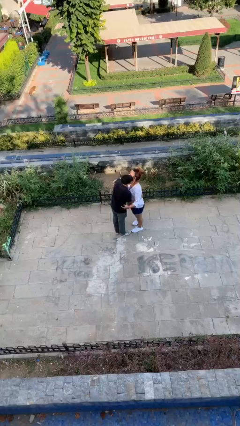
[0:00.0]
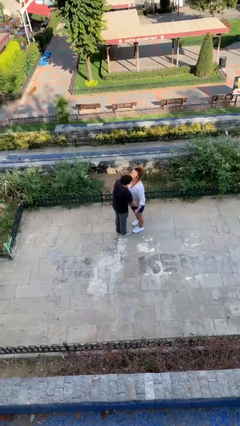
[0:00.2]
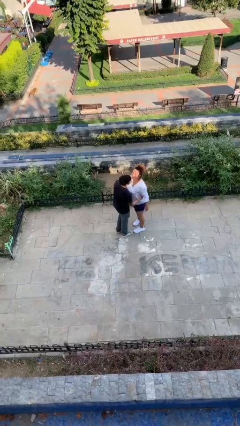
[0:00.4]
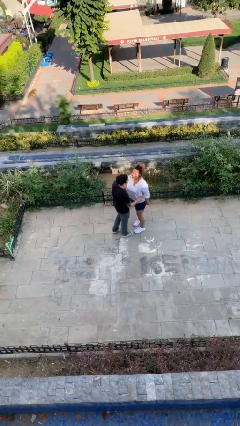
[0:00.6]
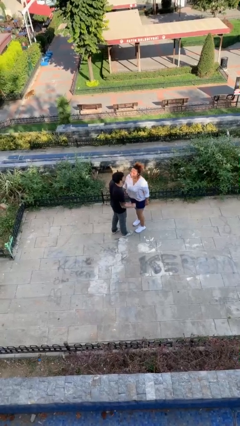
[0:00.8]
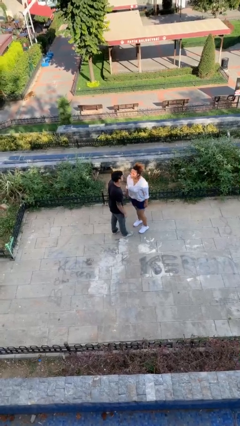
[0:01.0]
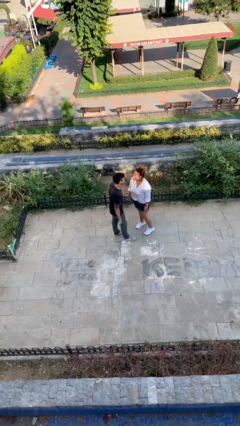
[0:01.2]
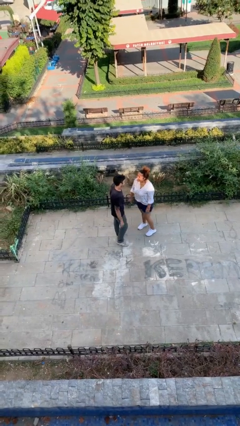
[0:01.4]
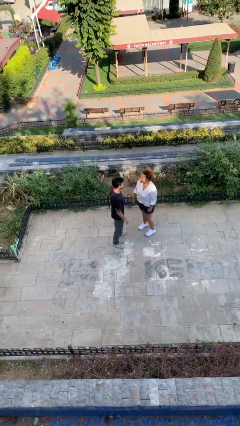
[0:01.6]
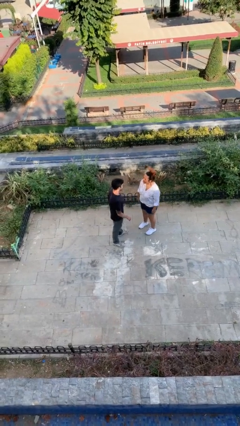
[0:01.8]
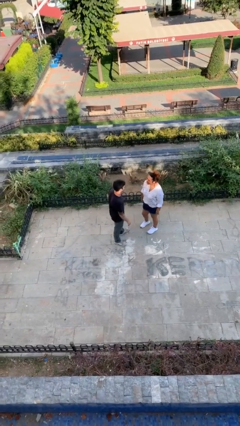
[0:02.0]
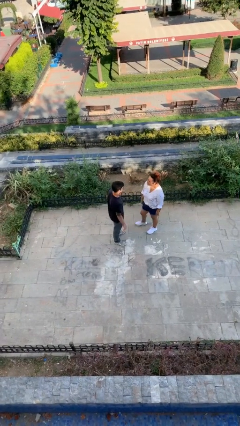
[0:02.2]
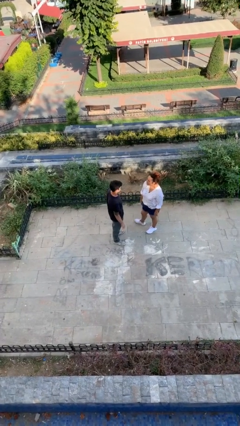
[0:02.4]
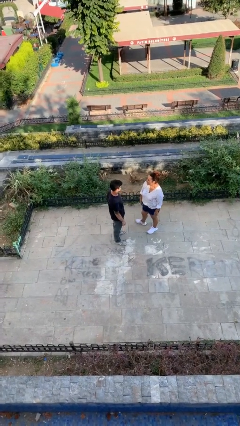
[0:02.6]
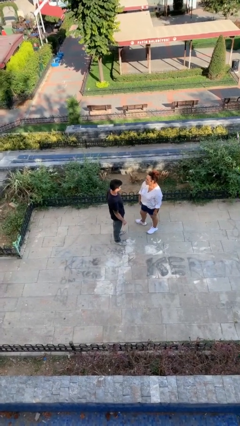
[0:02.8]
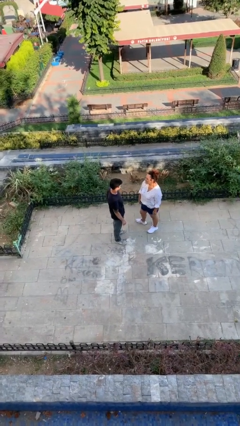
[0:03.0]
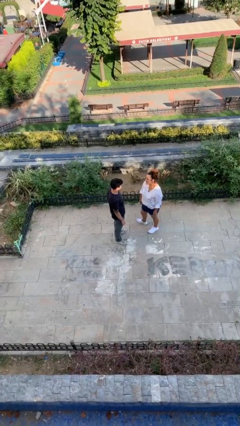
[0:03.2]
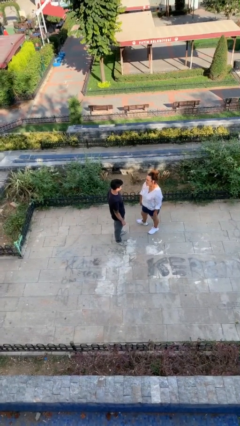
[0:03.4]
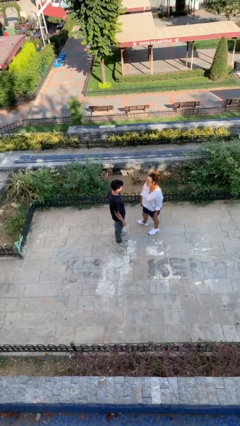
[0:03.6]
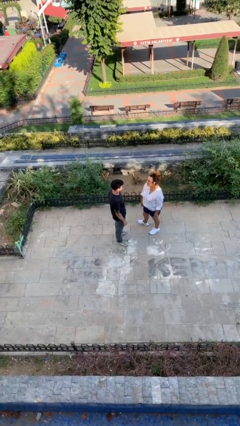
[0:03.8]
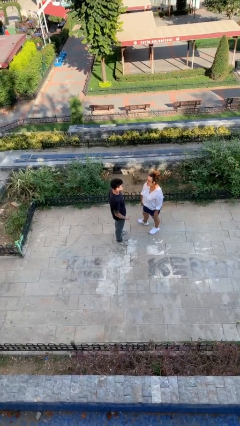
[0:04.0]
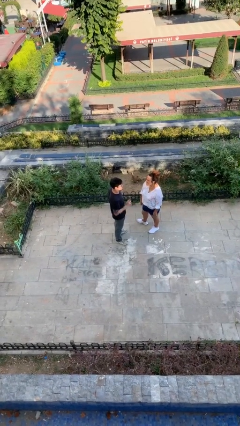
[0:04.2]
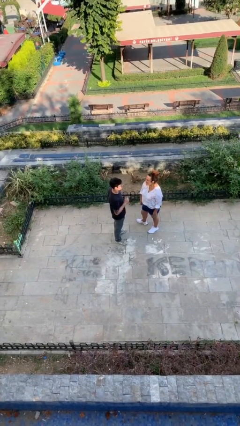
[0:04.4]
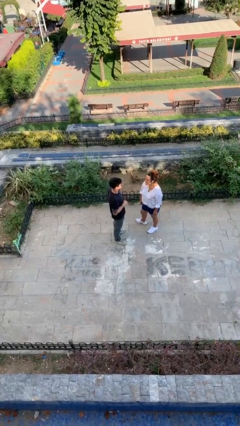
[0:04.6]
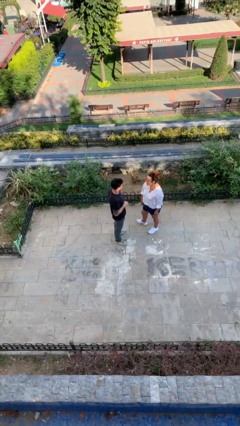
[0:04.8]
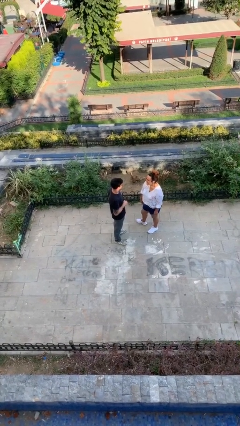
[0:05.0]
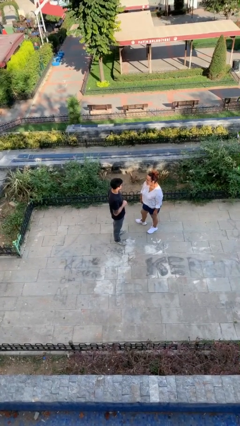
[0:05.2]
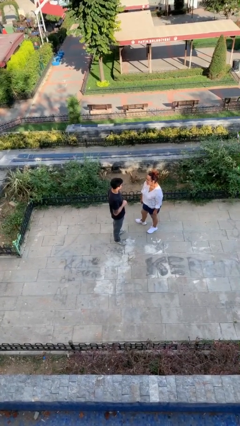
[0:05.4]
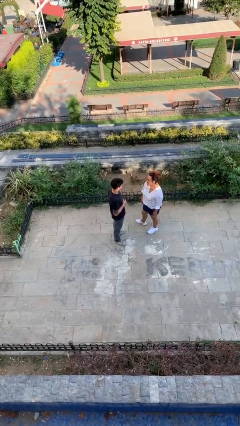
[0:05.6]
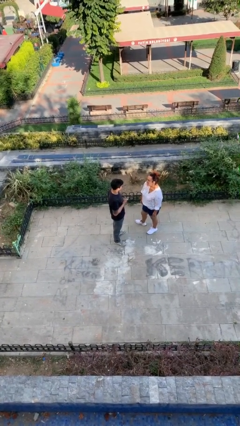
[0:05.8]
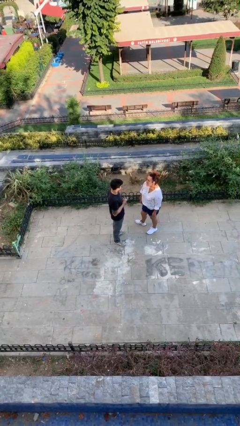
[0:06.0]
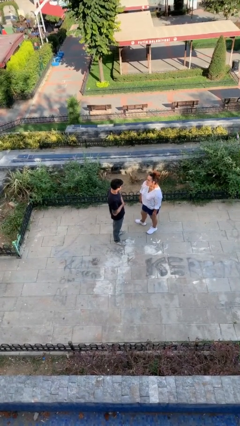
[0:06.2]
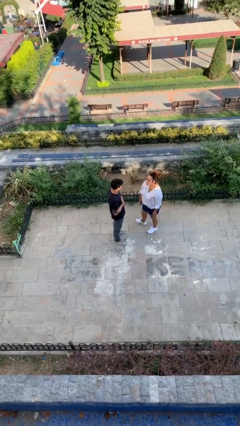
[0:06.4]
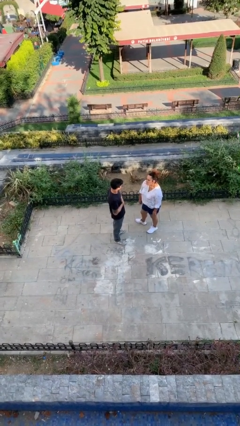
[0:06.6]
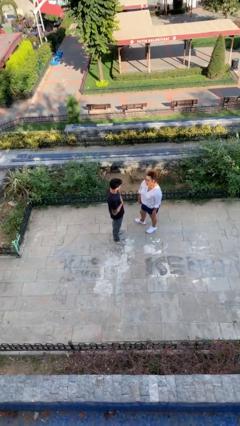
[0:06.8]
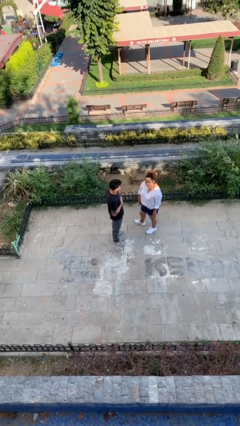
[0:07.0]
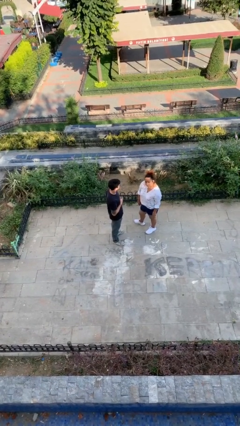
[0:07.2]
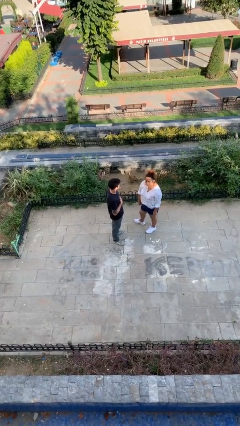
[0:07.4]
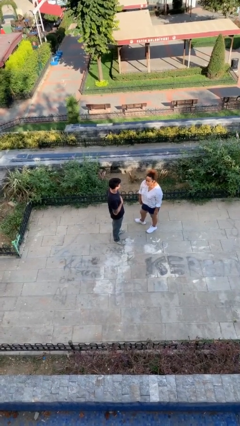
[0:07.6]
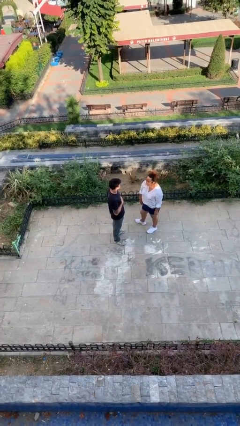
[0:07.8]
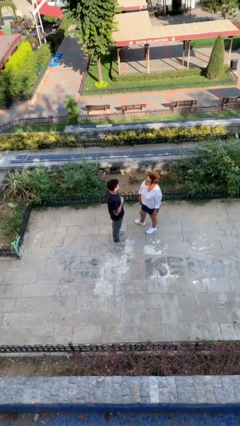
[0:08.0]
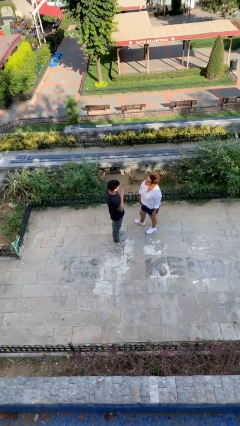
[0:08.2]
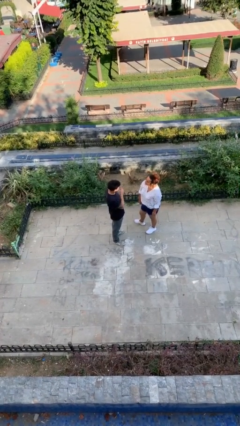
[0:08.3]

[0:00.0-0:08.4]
person talks to person

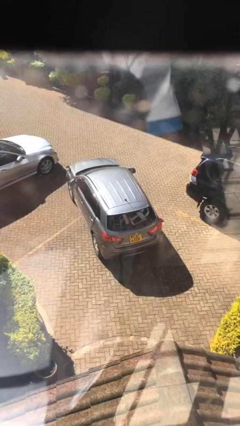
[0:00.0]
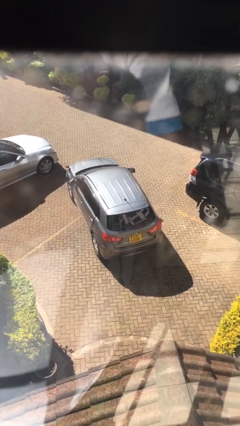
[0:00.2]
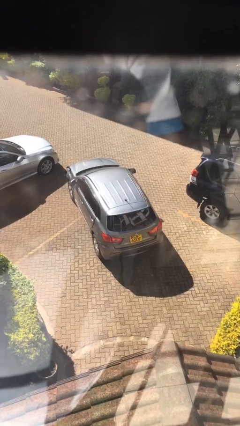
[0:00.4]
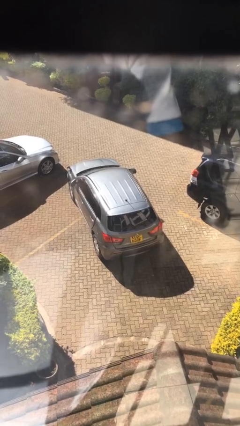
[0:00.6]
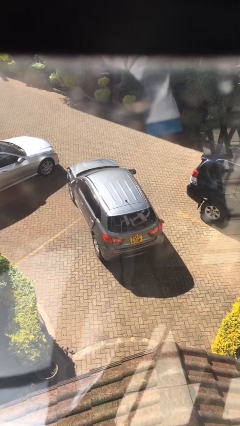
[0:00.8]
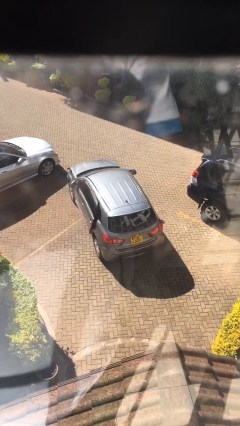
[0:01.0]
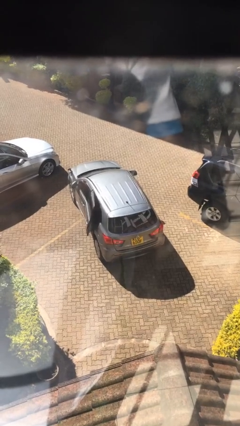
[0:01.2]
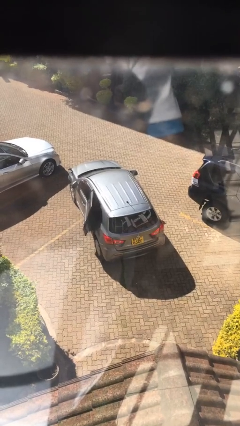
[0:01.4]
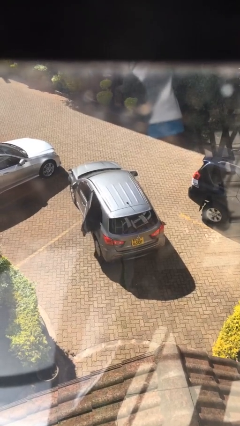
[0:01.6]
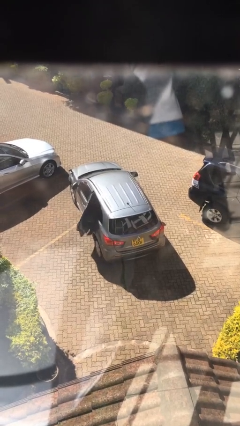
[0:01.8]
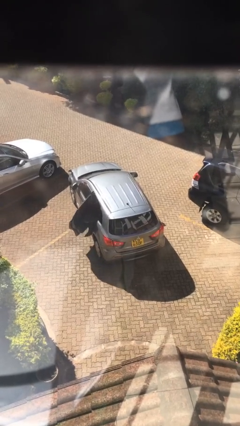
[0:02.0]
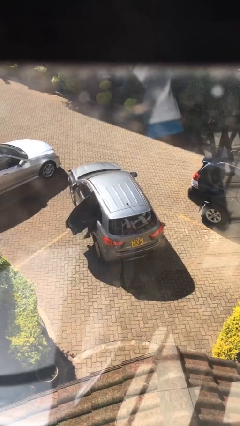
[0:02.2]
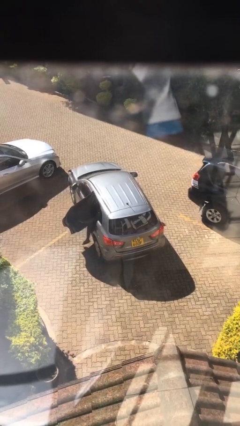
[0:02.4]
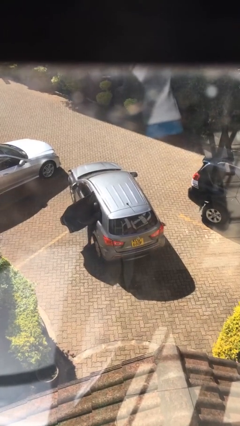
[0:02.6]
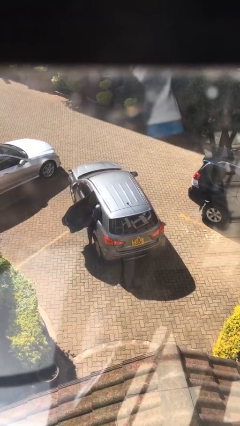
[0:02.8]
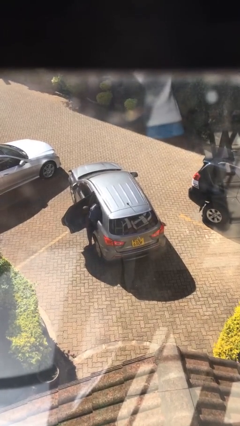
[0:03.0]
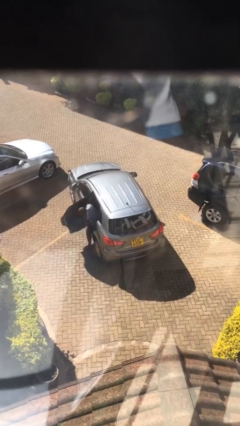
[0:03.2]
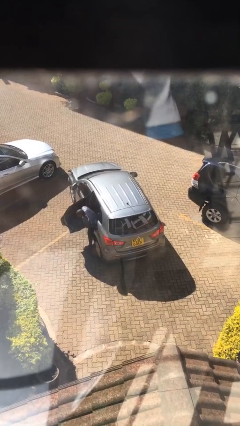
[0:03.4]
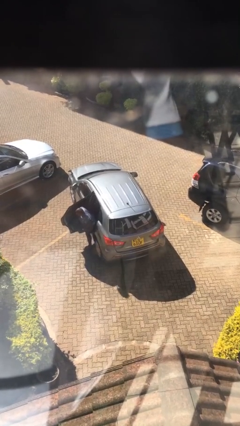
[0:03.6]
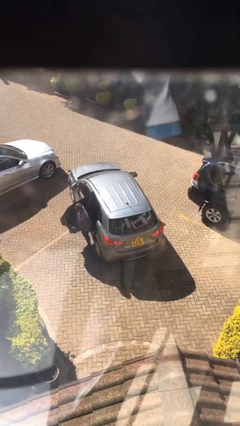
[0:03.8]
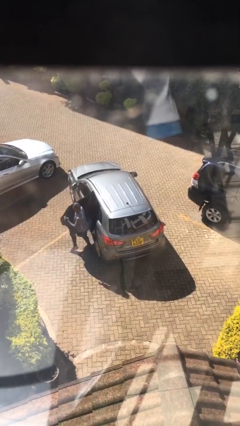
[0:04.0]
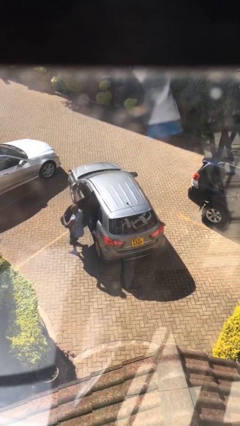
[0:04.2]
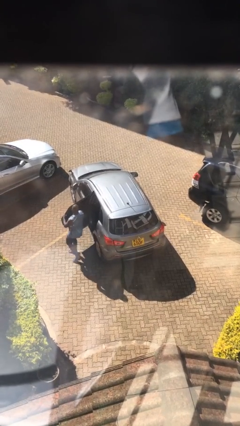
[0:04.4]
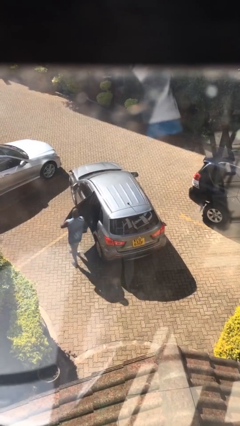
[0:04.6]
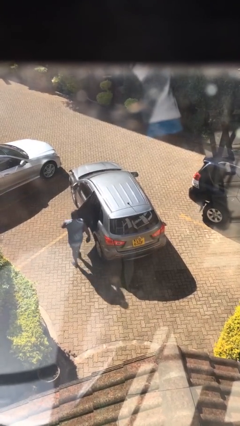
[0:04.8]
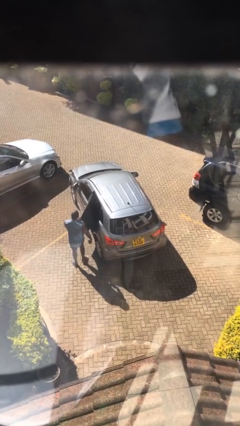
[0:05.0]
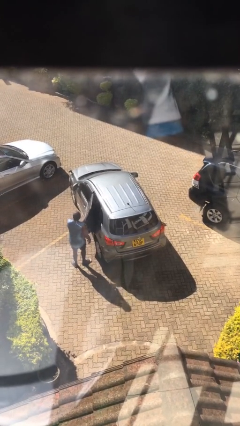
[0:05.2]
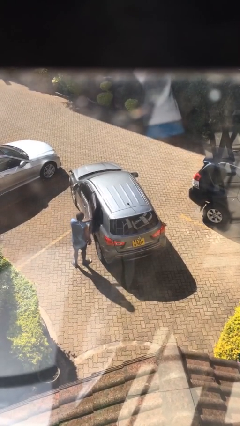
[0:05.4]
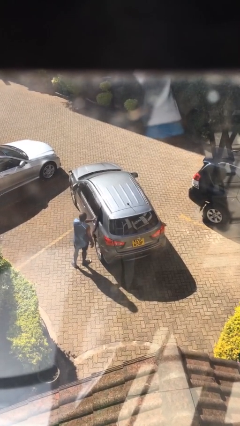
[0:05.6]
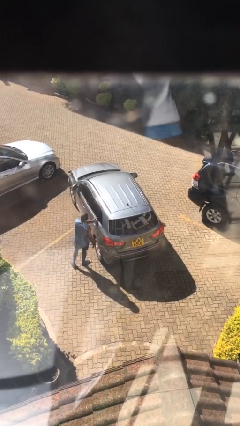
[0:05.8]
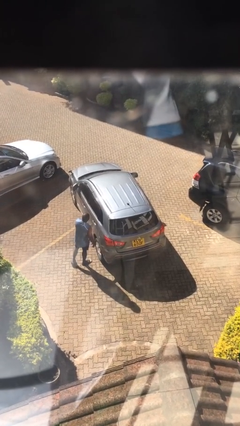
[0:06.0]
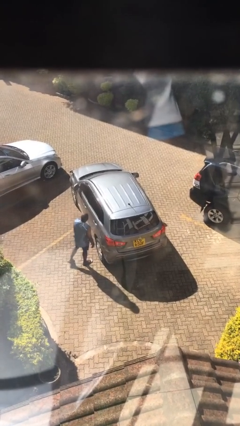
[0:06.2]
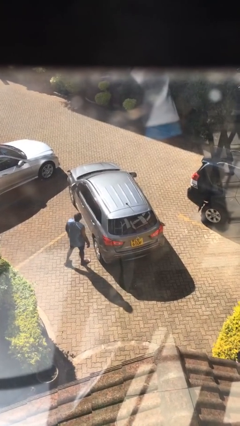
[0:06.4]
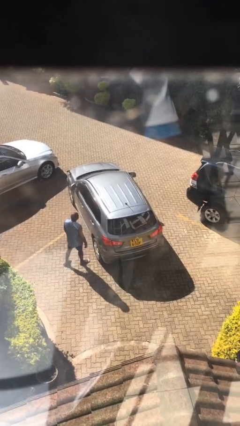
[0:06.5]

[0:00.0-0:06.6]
car drops off person

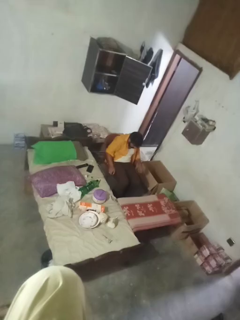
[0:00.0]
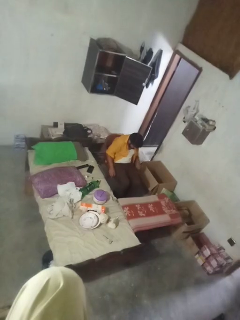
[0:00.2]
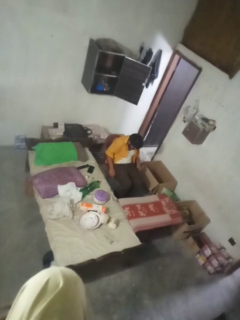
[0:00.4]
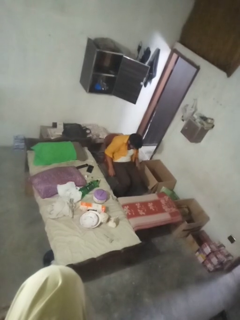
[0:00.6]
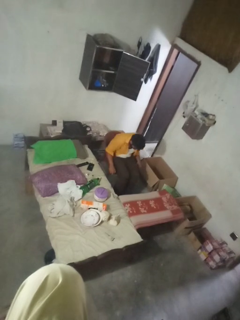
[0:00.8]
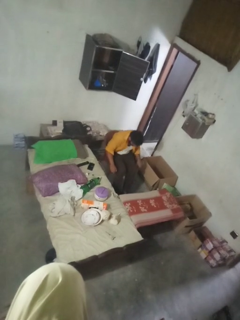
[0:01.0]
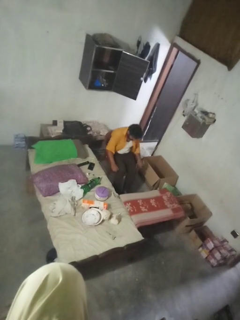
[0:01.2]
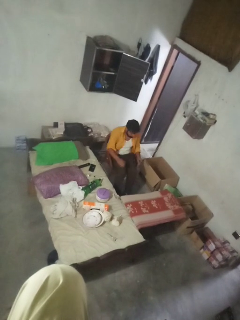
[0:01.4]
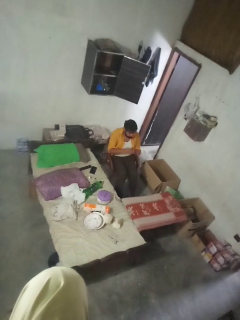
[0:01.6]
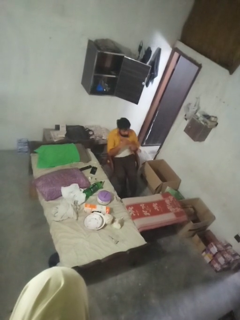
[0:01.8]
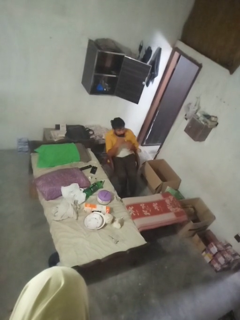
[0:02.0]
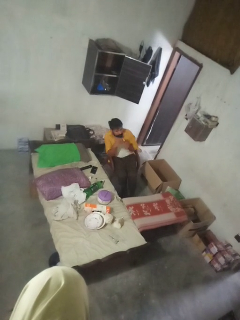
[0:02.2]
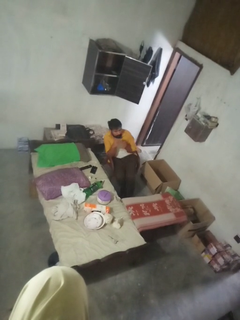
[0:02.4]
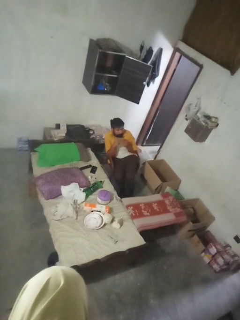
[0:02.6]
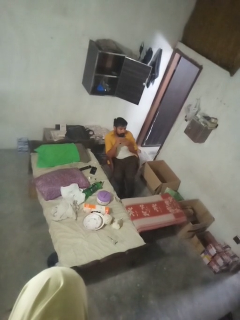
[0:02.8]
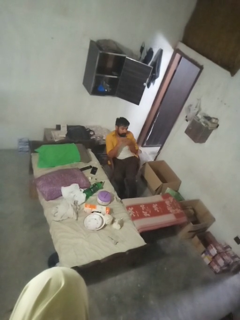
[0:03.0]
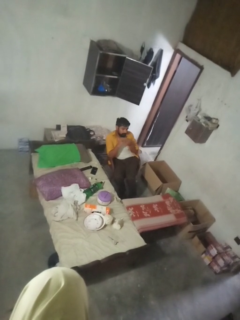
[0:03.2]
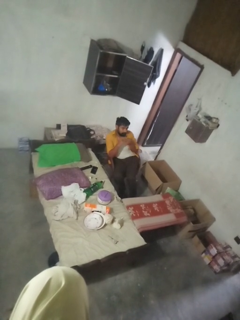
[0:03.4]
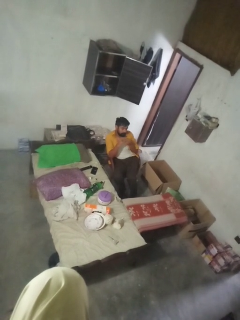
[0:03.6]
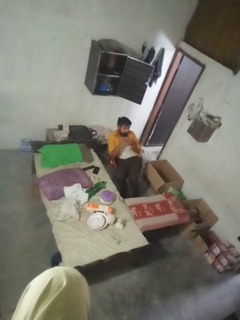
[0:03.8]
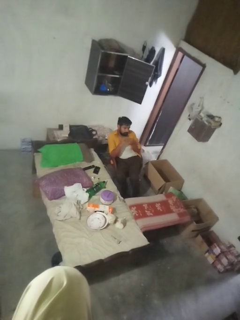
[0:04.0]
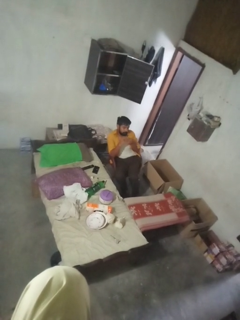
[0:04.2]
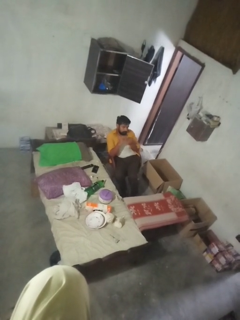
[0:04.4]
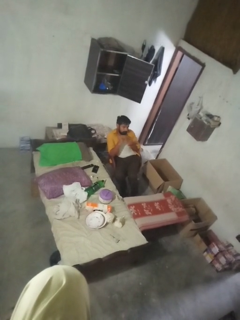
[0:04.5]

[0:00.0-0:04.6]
person clips fingernails
